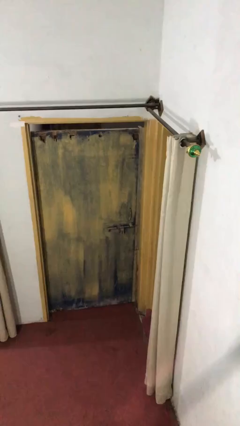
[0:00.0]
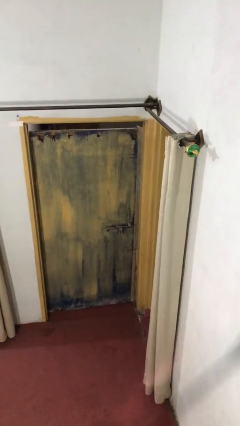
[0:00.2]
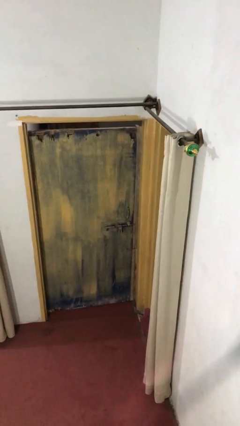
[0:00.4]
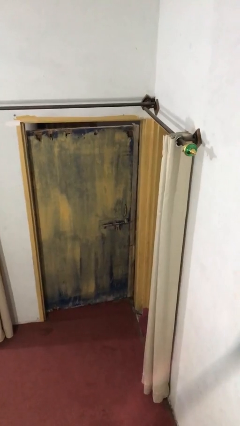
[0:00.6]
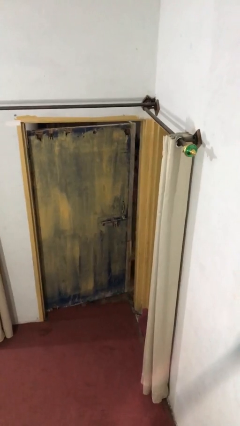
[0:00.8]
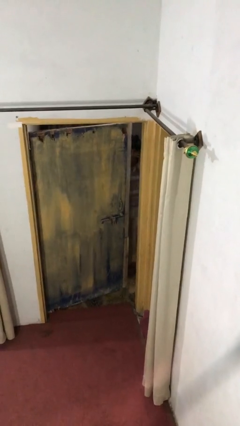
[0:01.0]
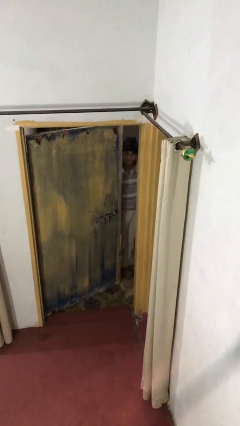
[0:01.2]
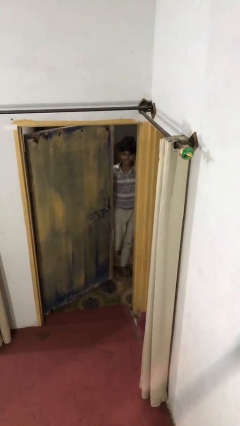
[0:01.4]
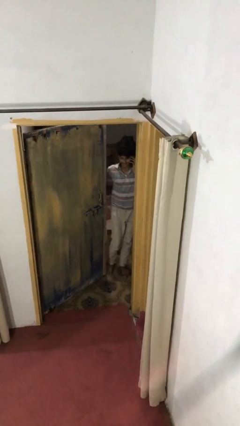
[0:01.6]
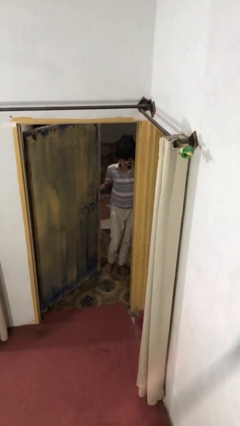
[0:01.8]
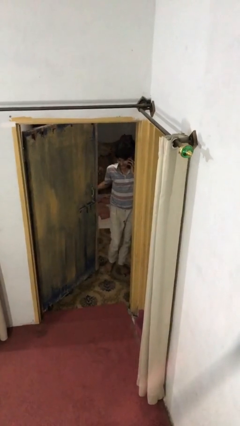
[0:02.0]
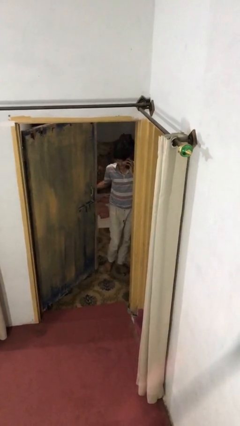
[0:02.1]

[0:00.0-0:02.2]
person opens facility door

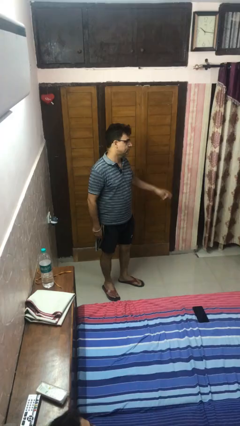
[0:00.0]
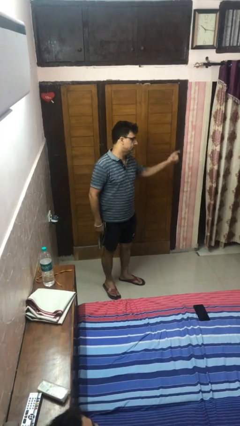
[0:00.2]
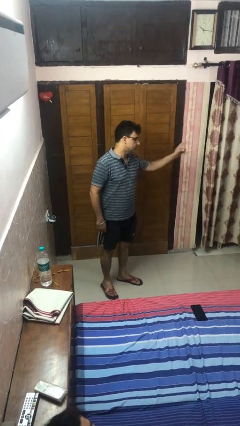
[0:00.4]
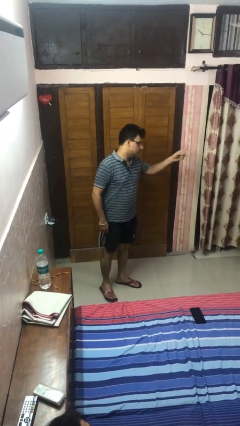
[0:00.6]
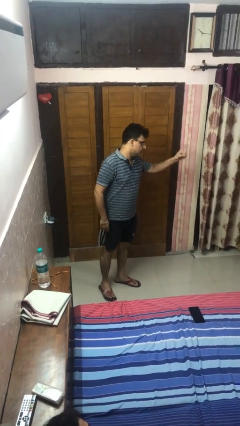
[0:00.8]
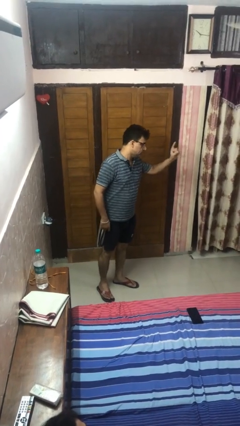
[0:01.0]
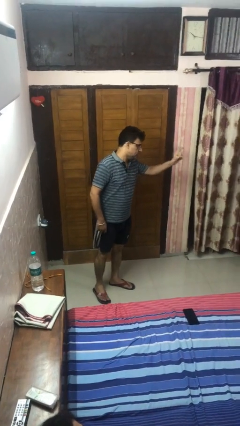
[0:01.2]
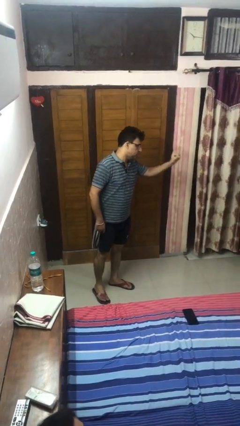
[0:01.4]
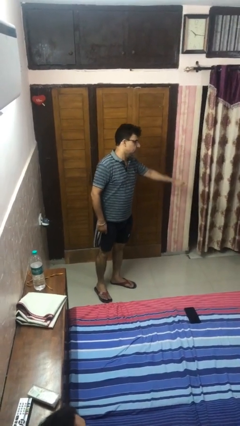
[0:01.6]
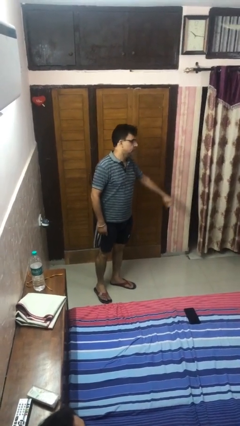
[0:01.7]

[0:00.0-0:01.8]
person points at person

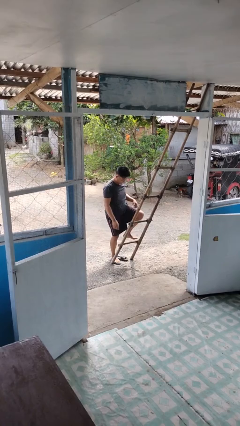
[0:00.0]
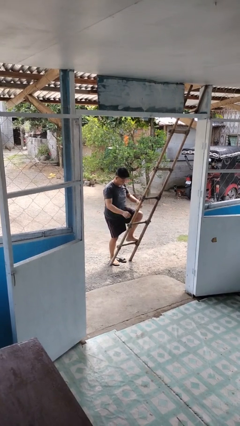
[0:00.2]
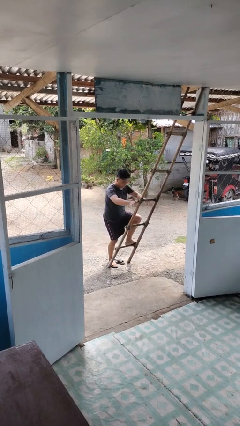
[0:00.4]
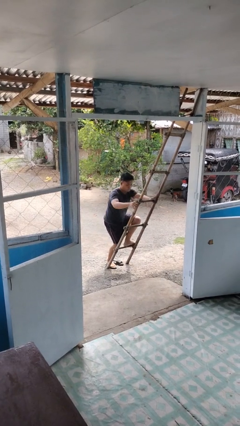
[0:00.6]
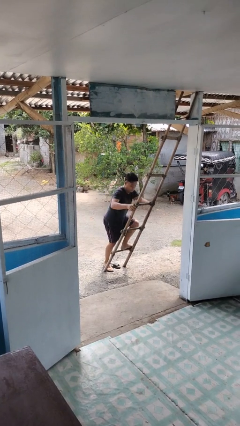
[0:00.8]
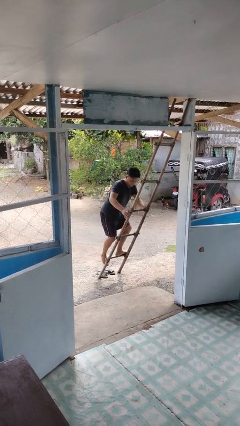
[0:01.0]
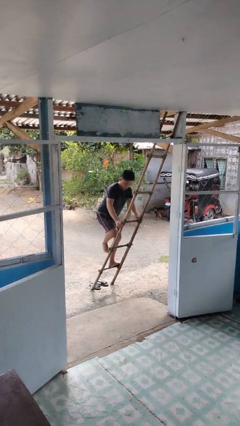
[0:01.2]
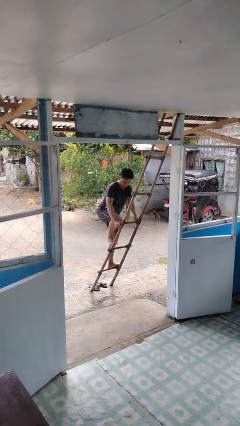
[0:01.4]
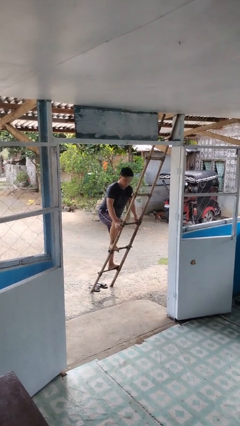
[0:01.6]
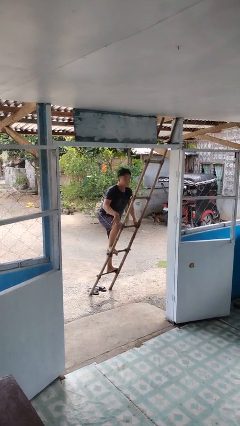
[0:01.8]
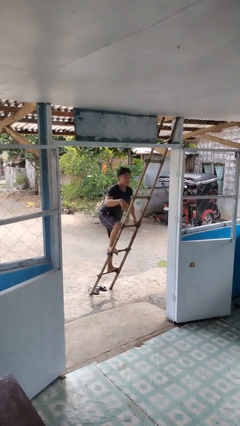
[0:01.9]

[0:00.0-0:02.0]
person climbs up ladder

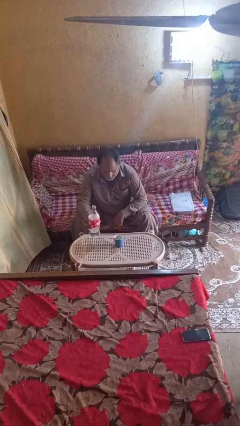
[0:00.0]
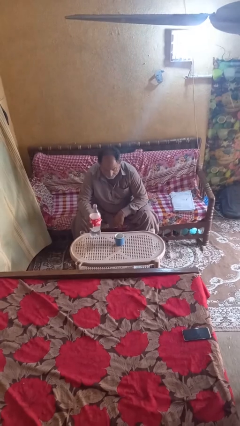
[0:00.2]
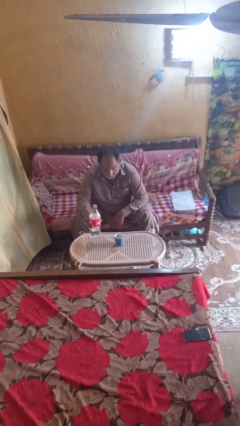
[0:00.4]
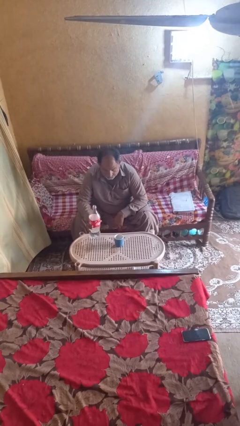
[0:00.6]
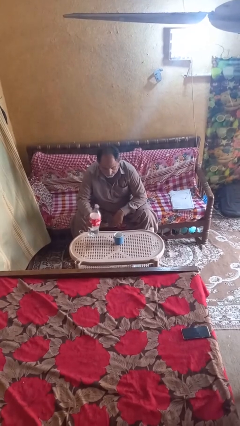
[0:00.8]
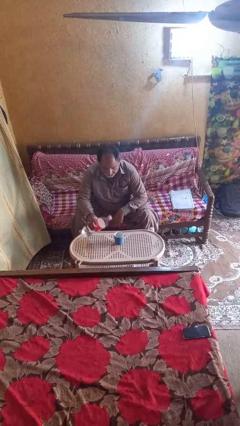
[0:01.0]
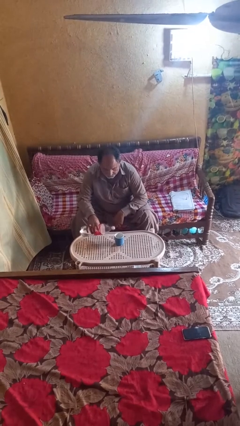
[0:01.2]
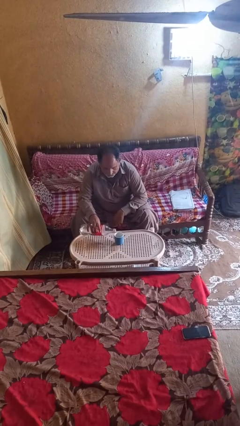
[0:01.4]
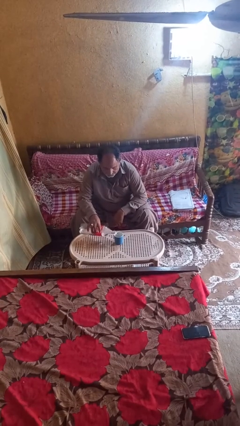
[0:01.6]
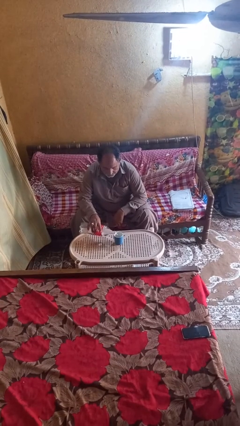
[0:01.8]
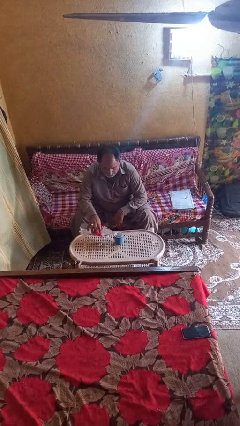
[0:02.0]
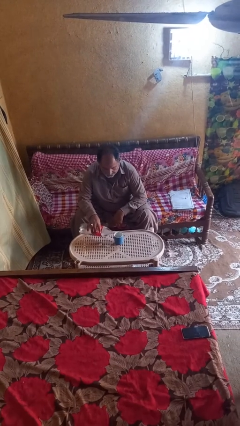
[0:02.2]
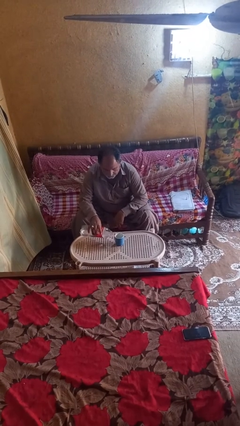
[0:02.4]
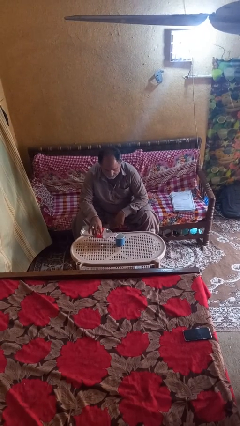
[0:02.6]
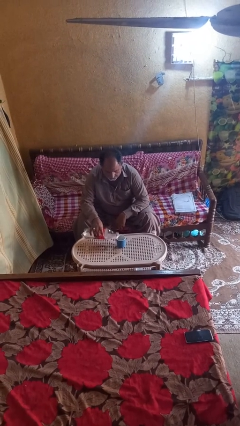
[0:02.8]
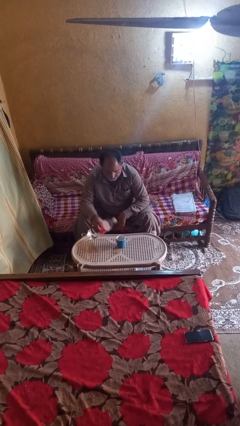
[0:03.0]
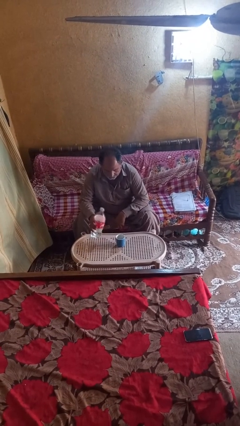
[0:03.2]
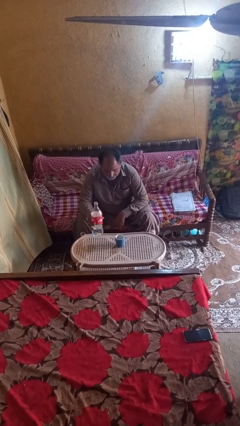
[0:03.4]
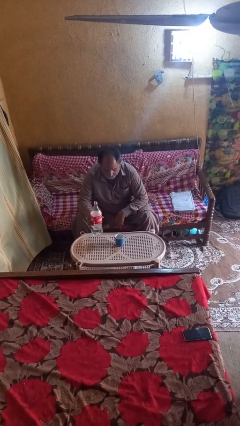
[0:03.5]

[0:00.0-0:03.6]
person pours liquid into cup

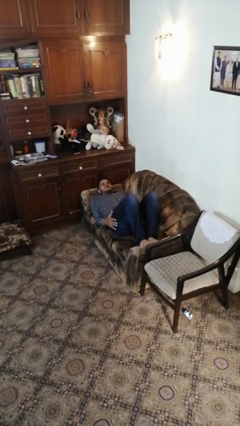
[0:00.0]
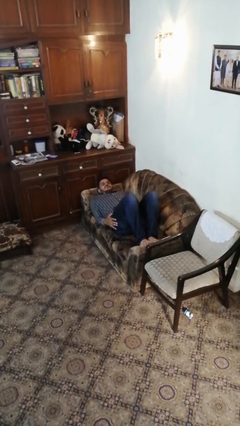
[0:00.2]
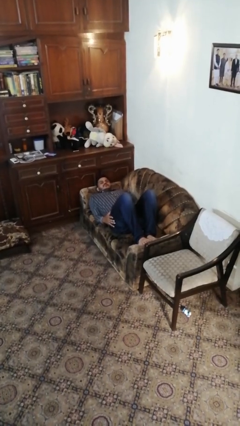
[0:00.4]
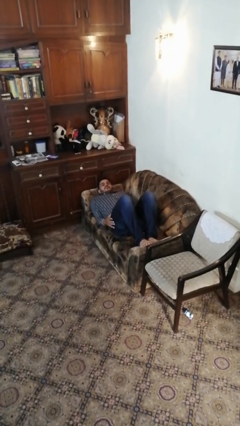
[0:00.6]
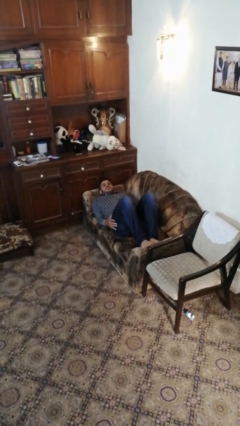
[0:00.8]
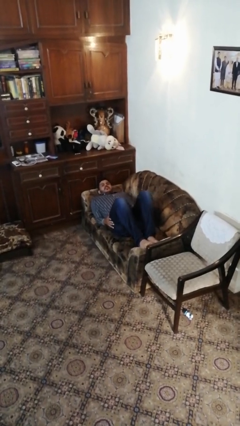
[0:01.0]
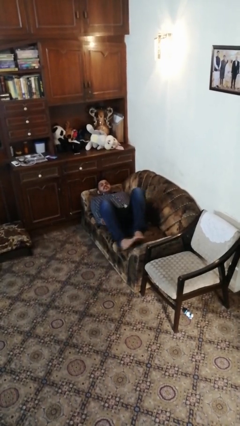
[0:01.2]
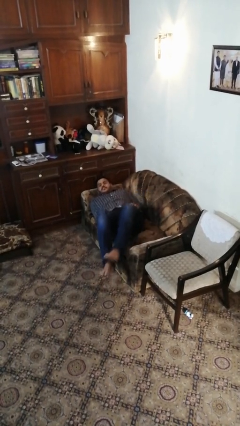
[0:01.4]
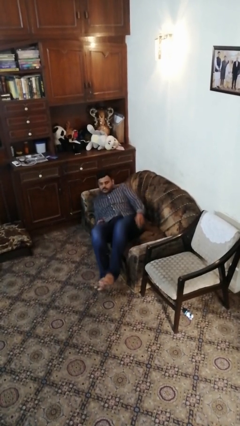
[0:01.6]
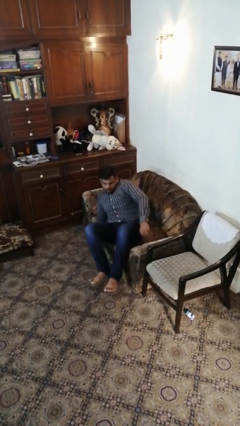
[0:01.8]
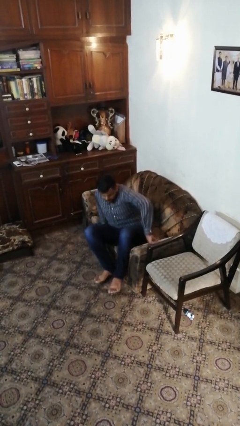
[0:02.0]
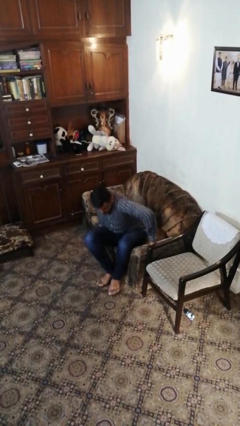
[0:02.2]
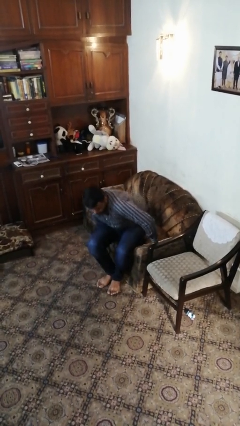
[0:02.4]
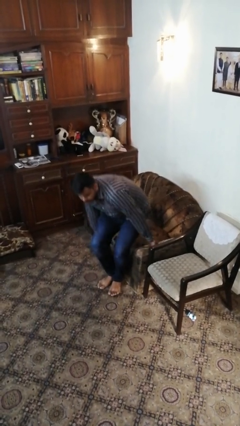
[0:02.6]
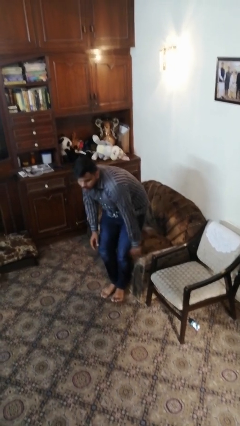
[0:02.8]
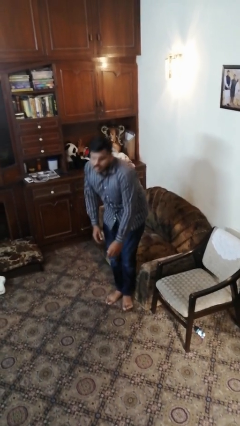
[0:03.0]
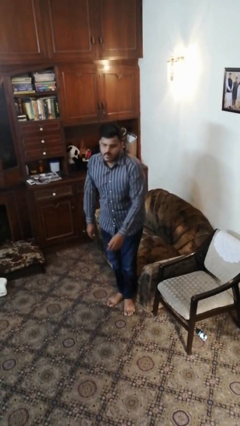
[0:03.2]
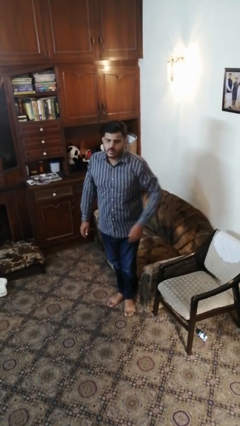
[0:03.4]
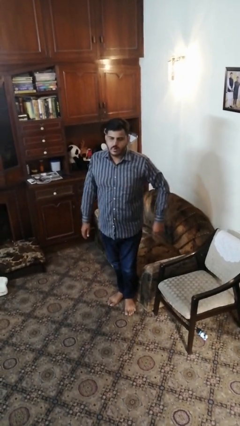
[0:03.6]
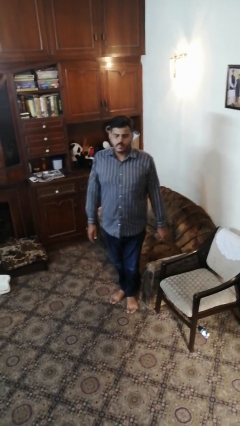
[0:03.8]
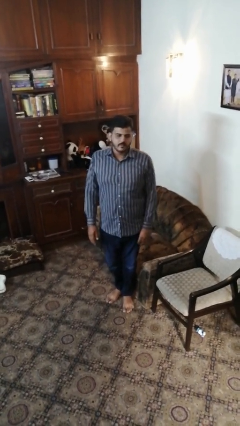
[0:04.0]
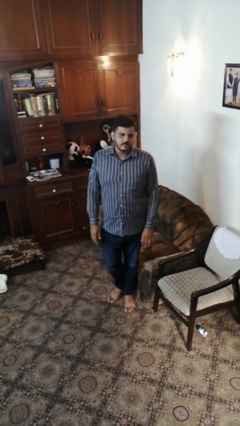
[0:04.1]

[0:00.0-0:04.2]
person stands up

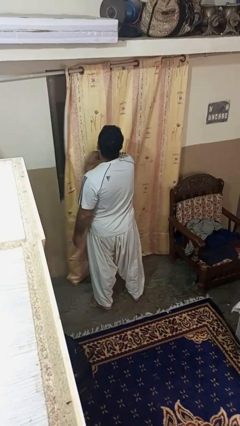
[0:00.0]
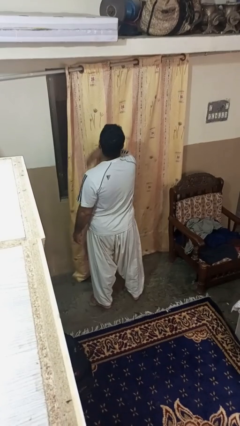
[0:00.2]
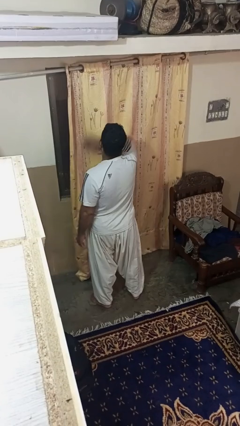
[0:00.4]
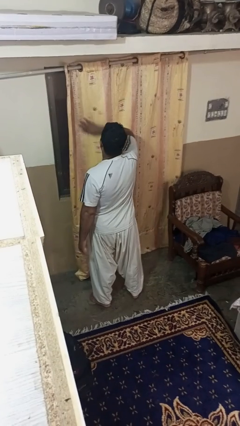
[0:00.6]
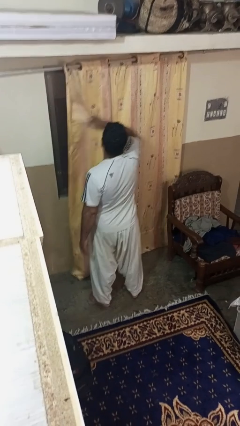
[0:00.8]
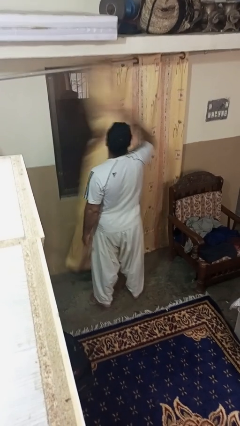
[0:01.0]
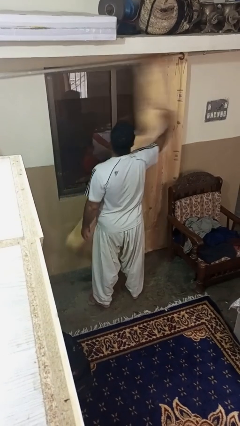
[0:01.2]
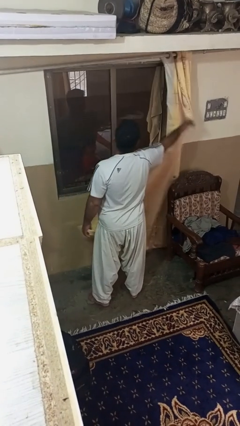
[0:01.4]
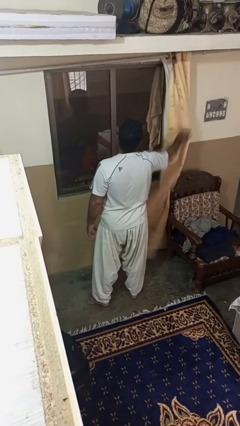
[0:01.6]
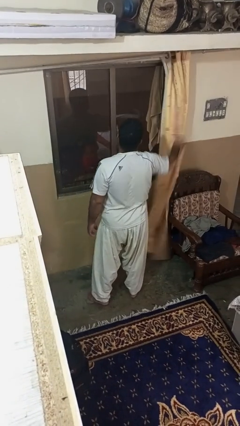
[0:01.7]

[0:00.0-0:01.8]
person opens curtains

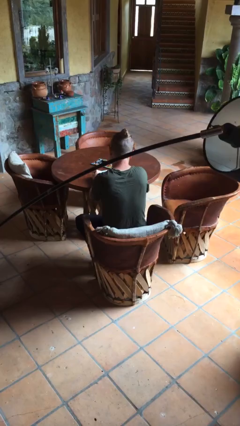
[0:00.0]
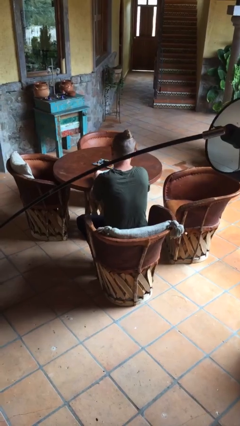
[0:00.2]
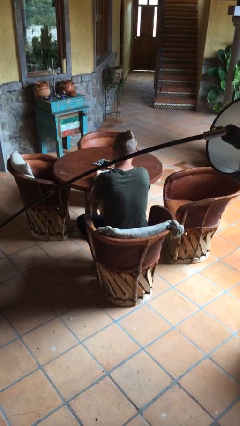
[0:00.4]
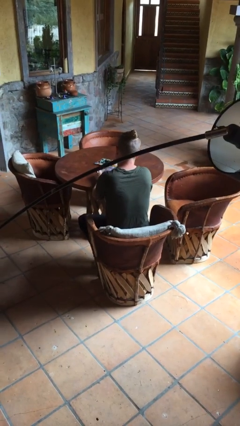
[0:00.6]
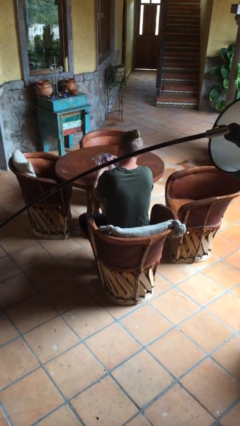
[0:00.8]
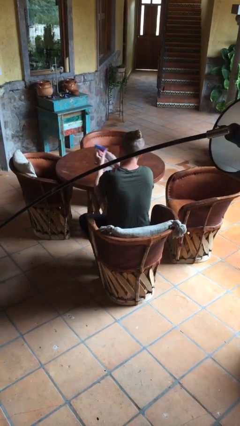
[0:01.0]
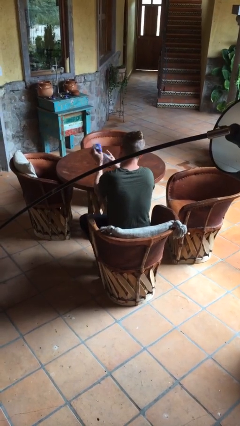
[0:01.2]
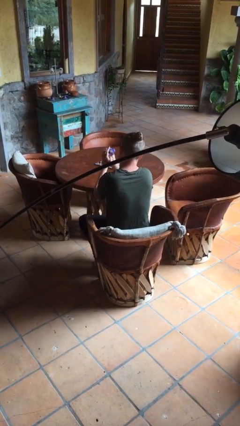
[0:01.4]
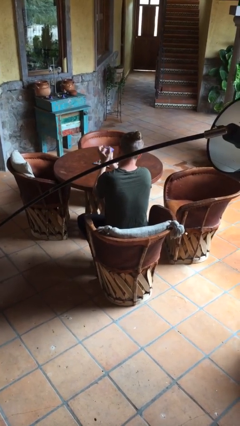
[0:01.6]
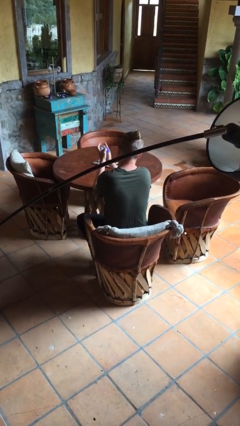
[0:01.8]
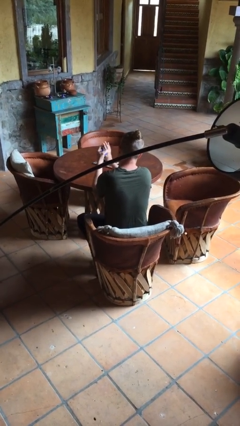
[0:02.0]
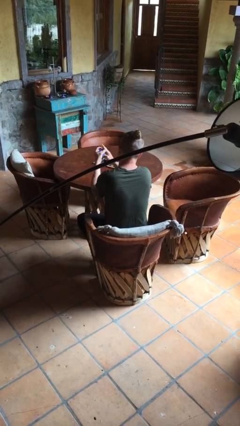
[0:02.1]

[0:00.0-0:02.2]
person crumples paper
